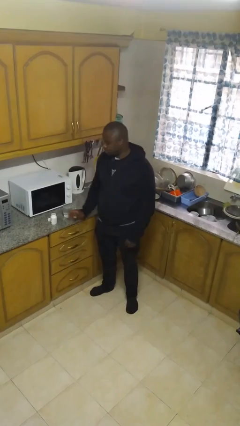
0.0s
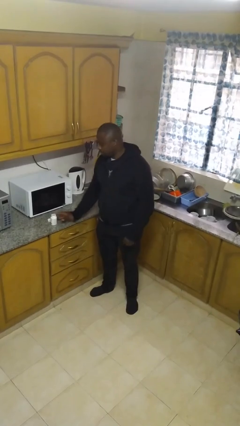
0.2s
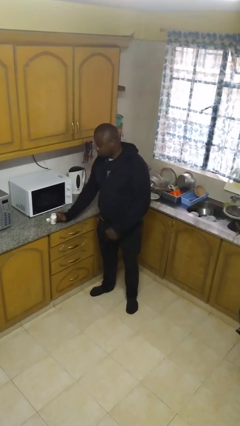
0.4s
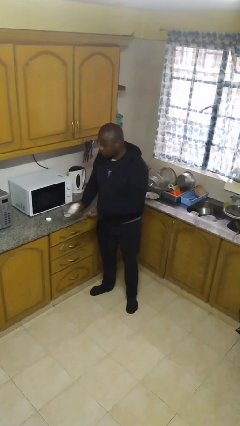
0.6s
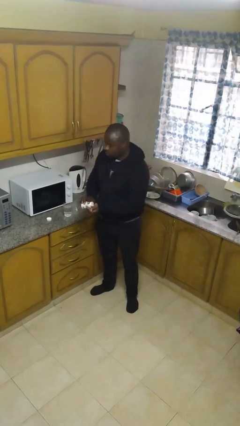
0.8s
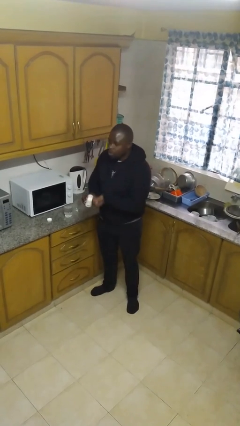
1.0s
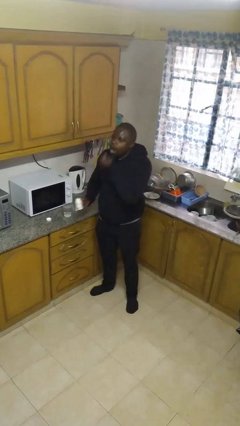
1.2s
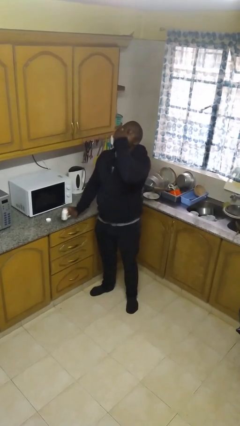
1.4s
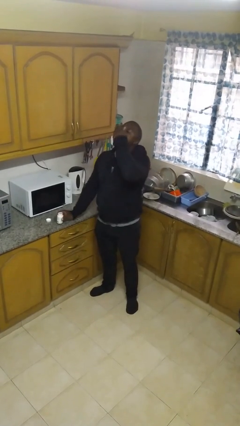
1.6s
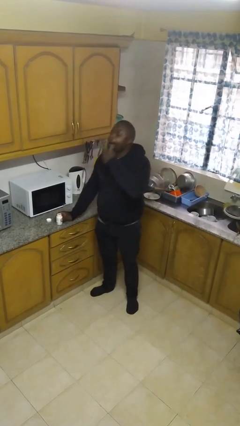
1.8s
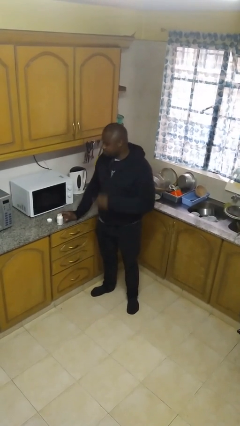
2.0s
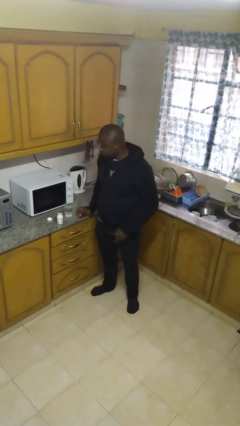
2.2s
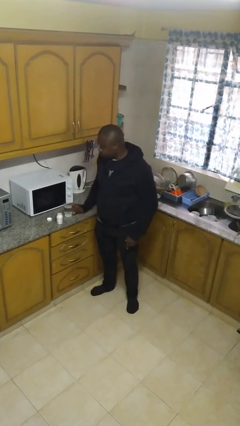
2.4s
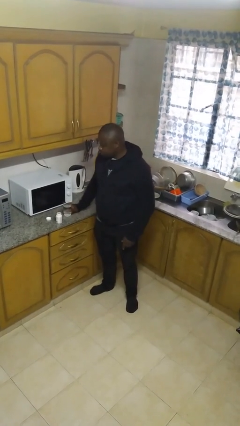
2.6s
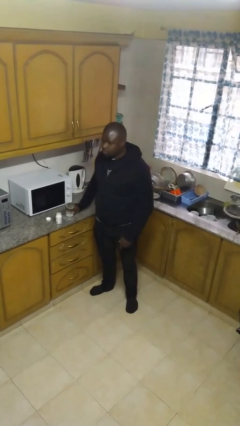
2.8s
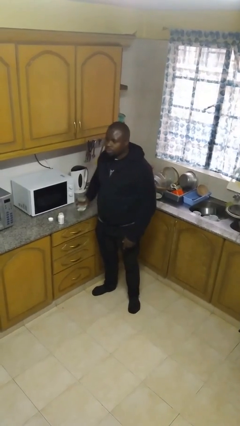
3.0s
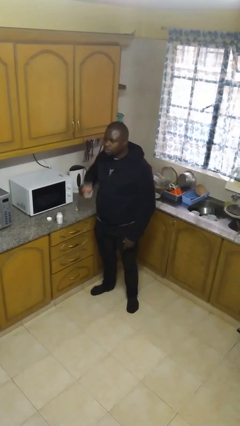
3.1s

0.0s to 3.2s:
person takes medicine pills

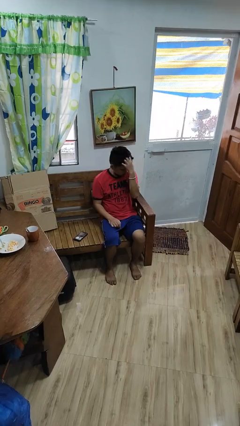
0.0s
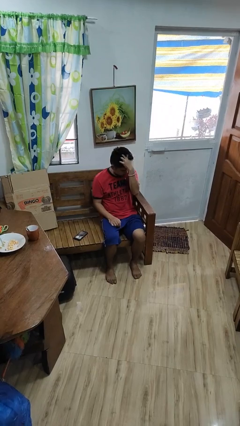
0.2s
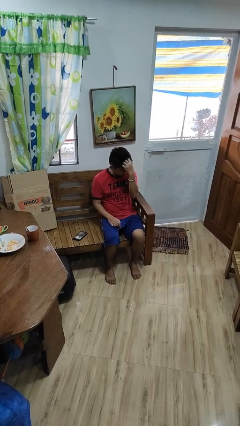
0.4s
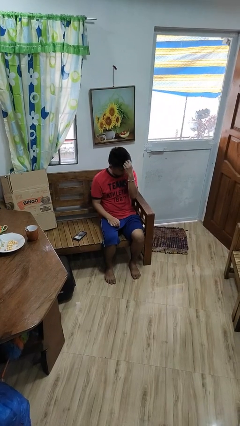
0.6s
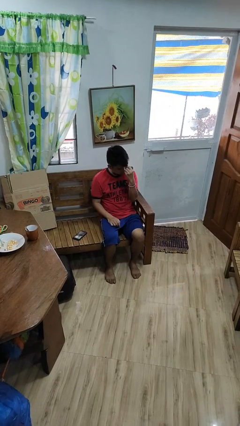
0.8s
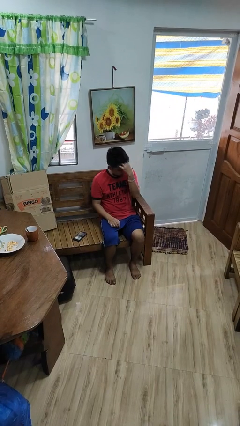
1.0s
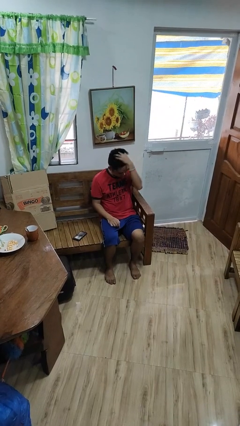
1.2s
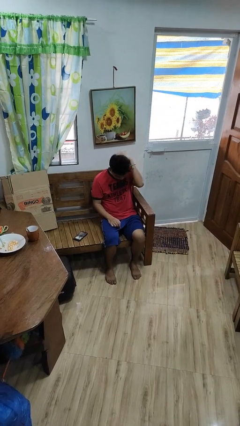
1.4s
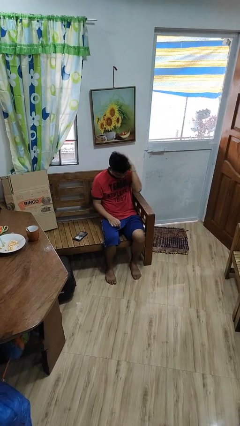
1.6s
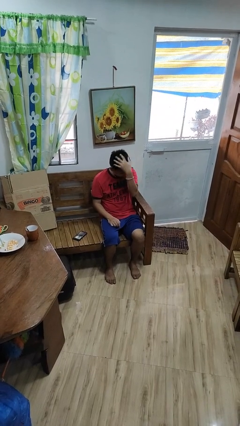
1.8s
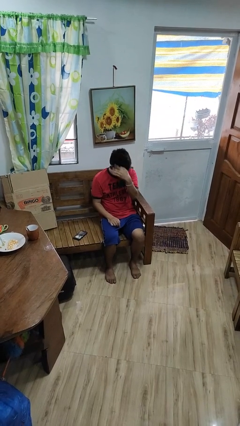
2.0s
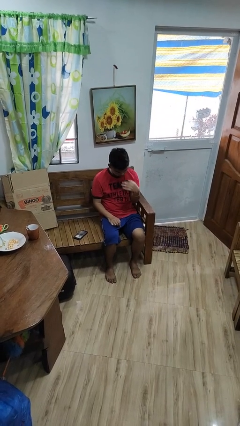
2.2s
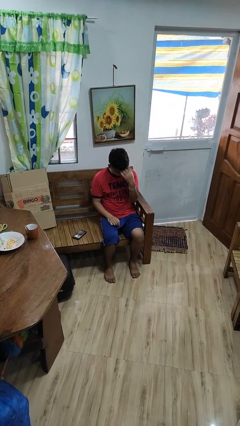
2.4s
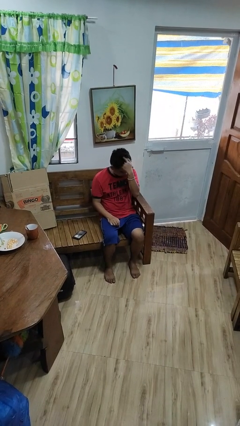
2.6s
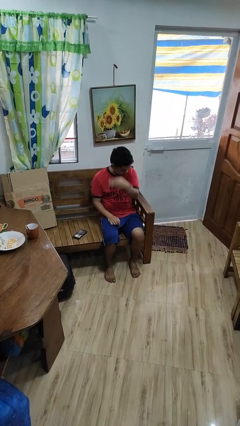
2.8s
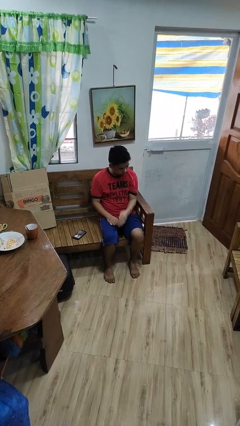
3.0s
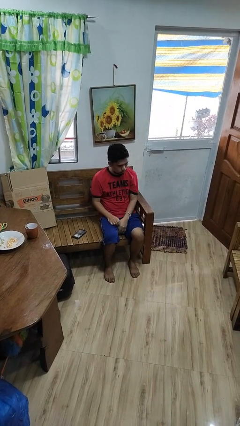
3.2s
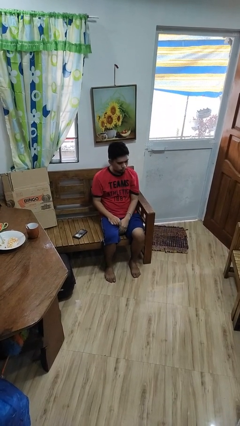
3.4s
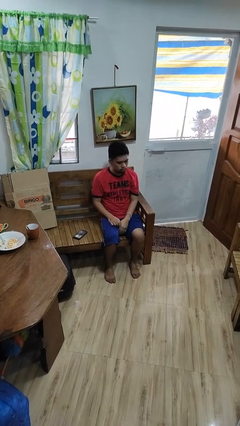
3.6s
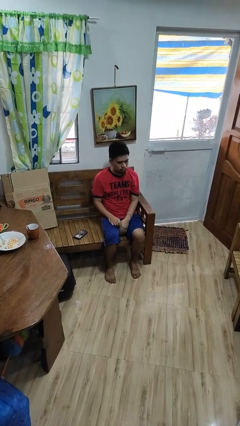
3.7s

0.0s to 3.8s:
person strokes hair

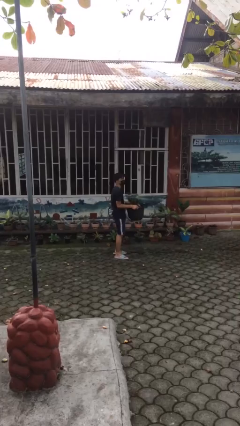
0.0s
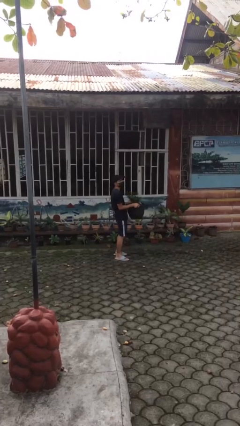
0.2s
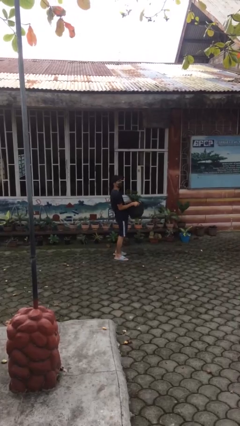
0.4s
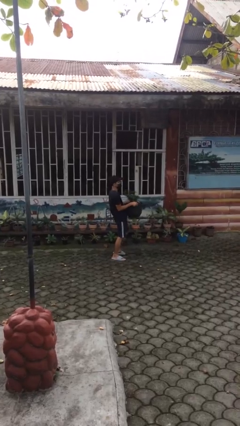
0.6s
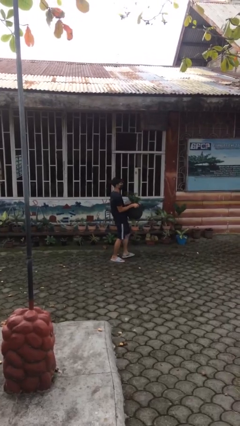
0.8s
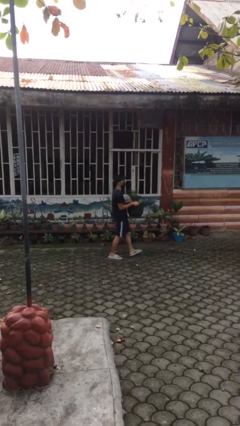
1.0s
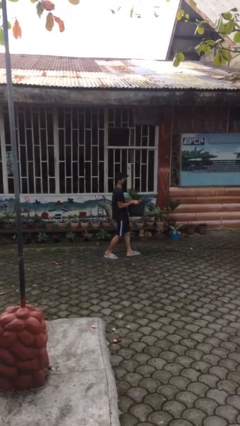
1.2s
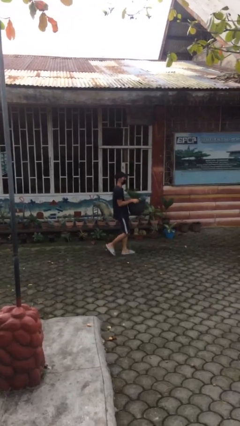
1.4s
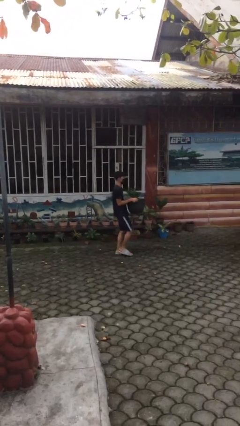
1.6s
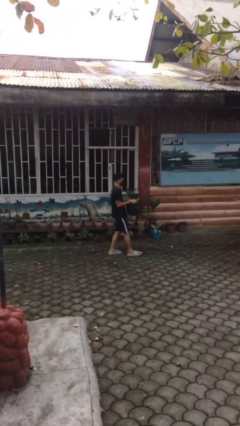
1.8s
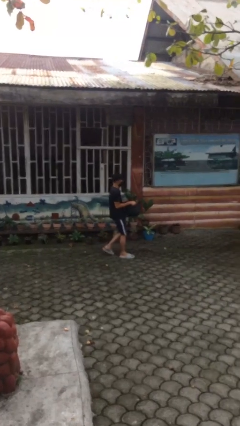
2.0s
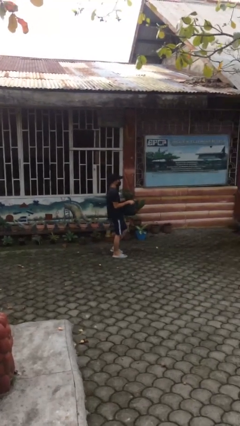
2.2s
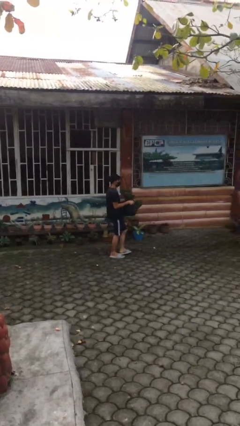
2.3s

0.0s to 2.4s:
person carries heavy object

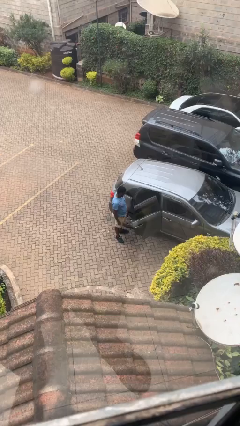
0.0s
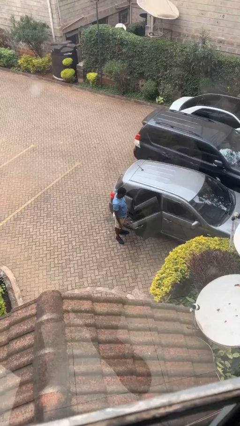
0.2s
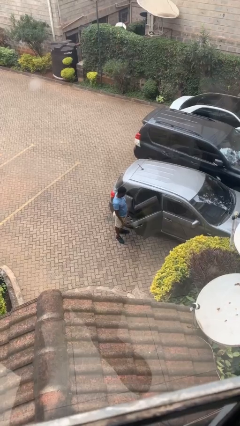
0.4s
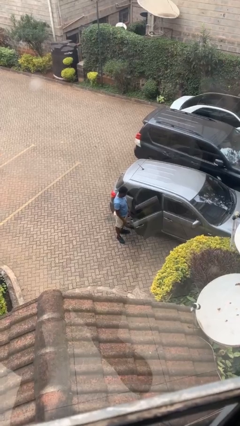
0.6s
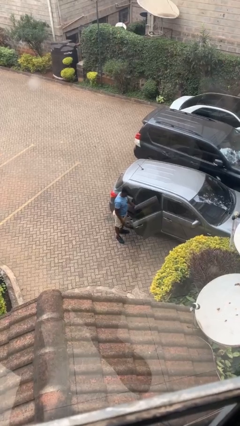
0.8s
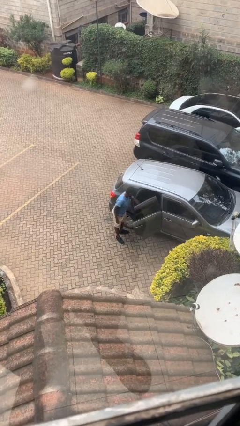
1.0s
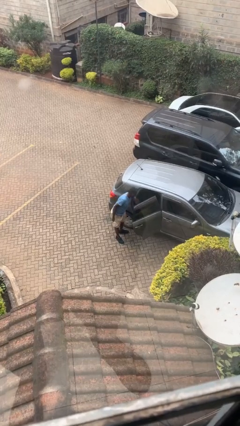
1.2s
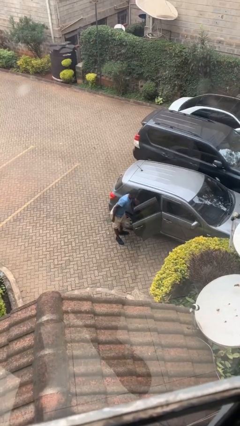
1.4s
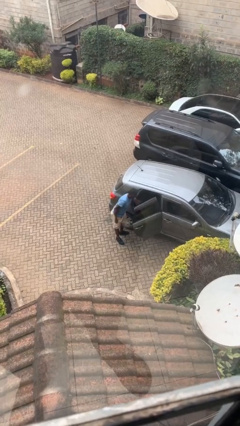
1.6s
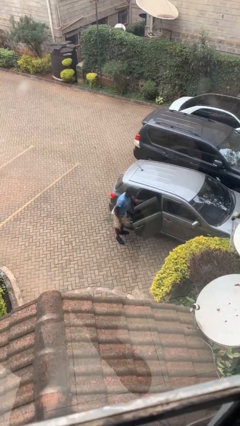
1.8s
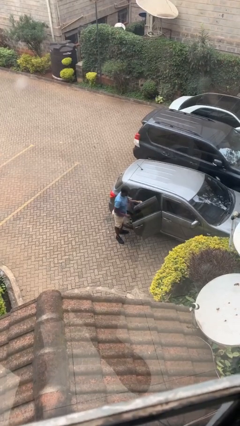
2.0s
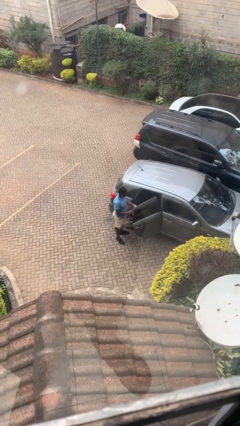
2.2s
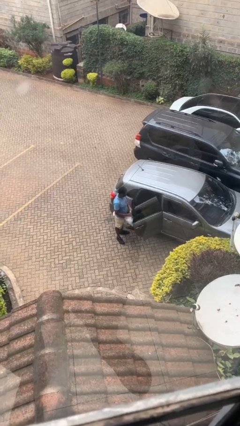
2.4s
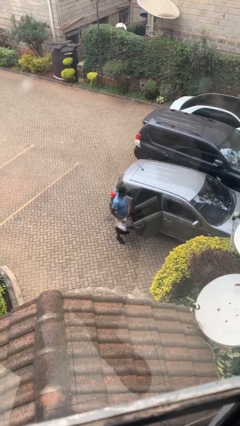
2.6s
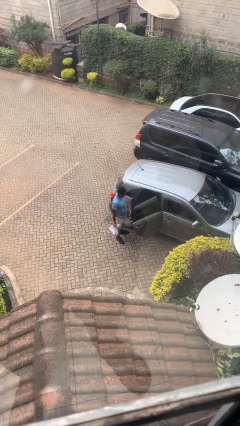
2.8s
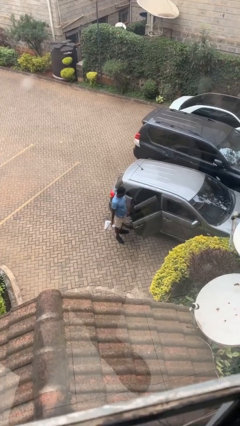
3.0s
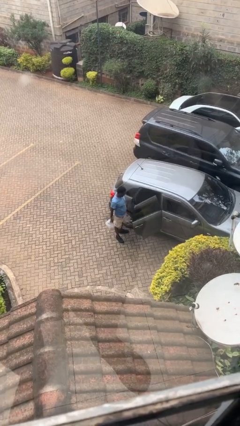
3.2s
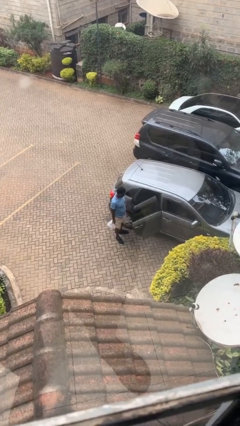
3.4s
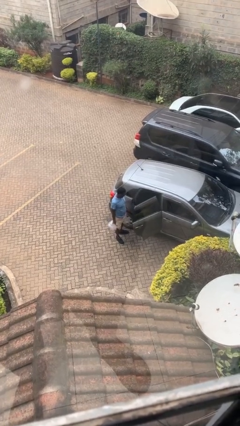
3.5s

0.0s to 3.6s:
person unloads car

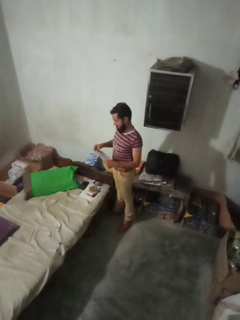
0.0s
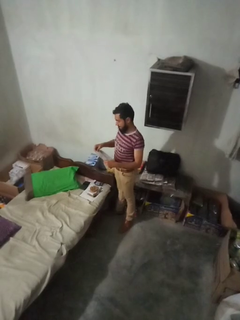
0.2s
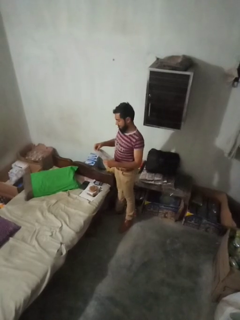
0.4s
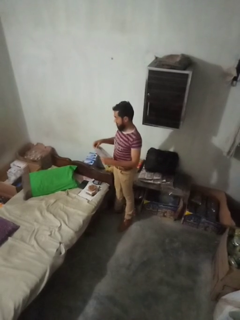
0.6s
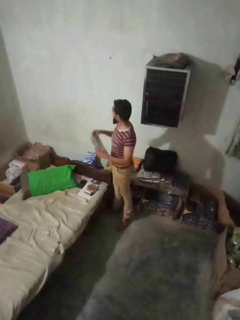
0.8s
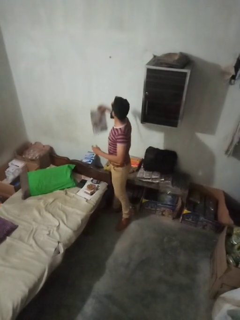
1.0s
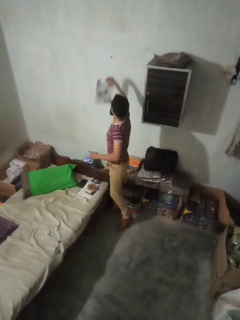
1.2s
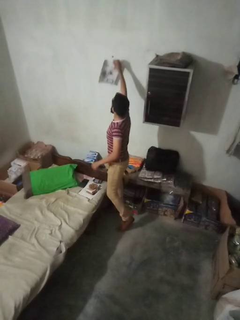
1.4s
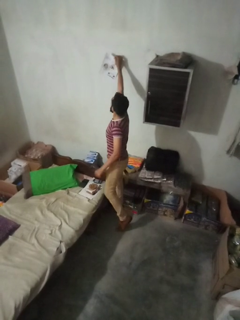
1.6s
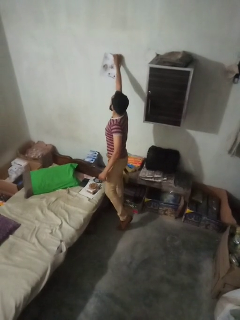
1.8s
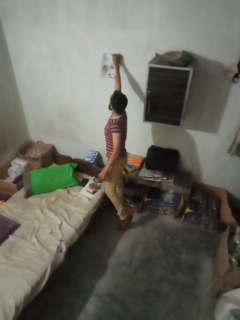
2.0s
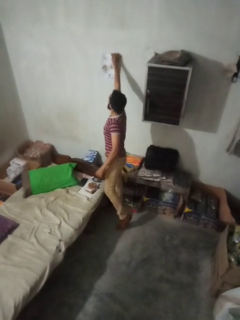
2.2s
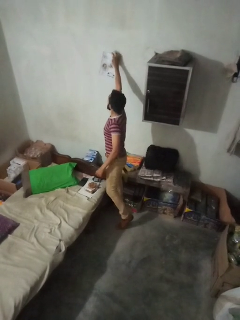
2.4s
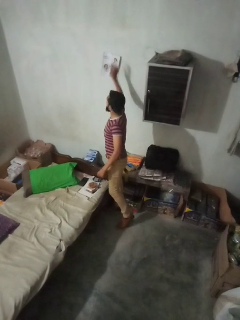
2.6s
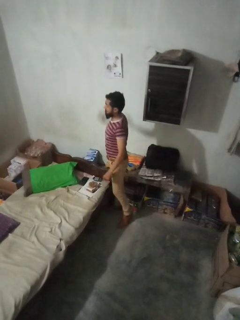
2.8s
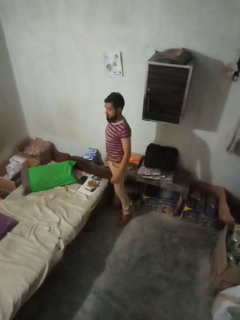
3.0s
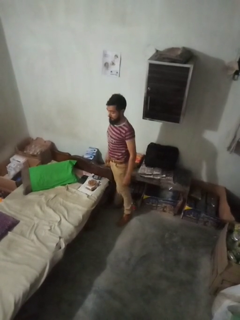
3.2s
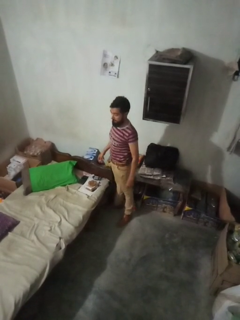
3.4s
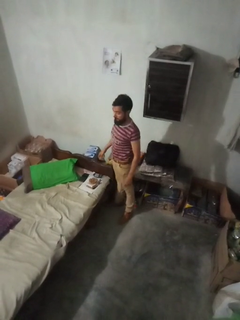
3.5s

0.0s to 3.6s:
person puts up picture frame

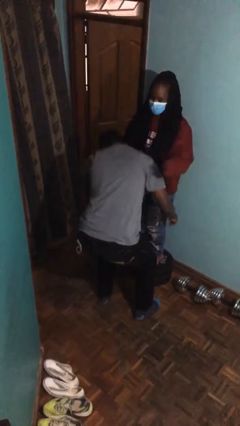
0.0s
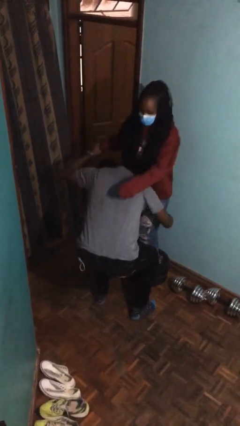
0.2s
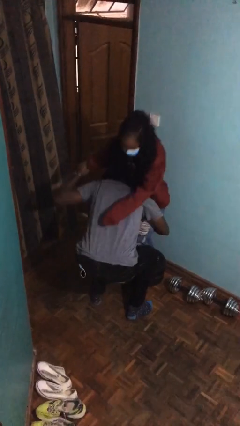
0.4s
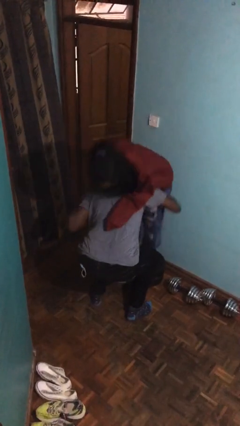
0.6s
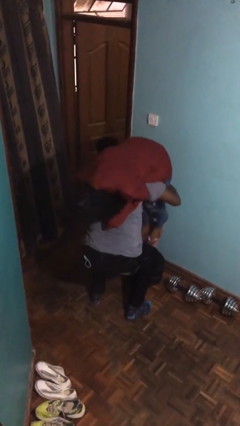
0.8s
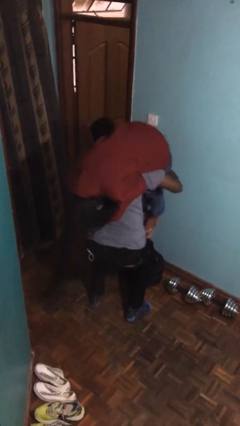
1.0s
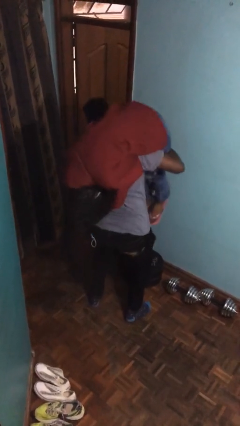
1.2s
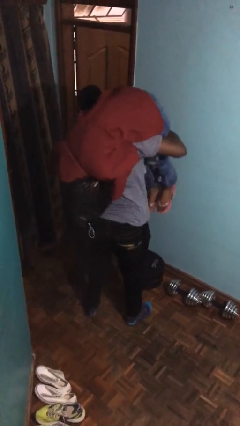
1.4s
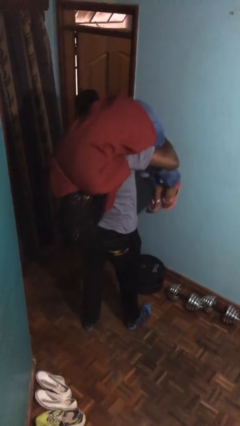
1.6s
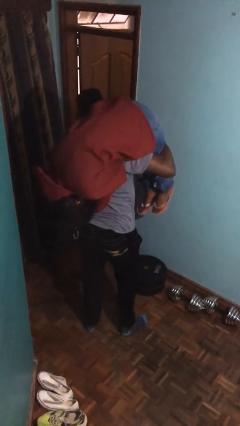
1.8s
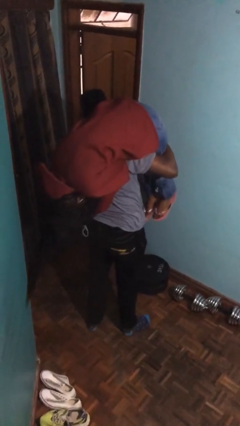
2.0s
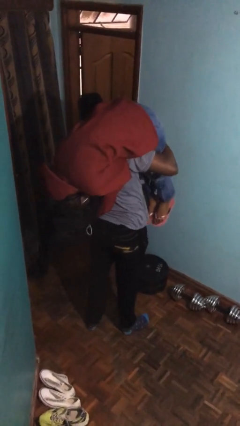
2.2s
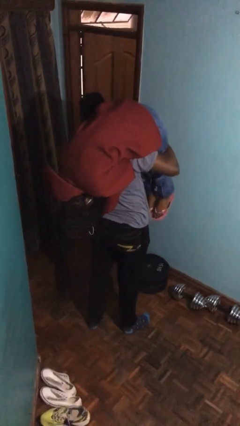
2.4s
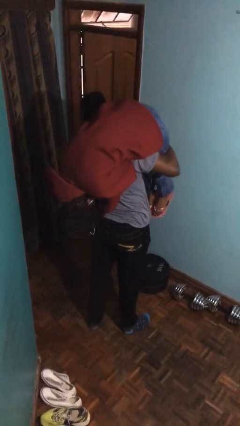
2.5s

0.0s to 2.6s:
person carries person over shoulder
